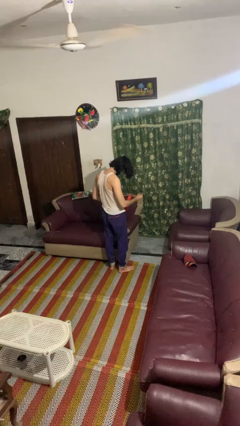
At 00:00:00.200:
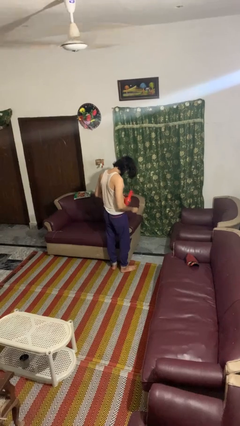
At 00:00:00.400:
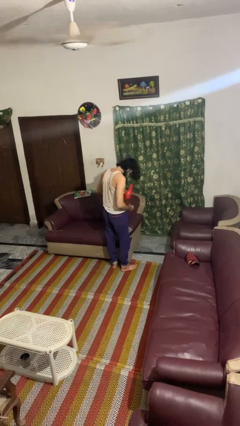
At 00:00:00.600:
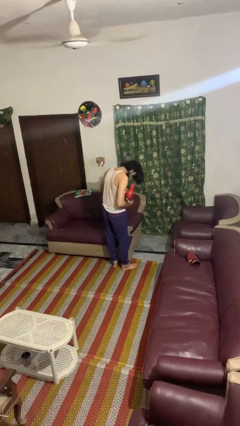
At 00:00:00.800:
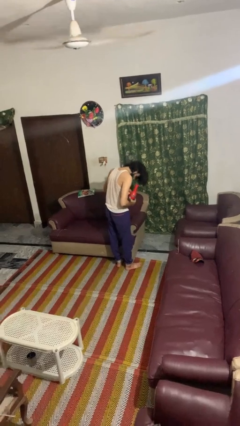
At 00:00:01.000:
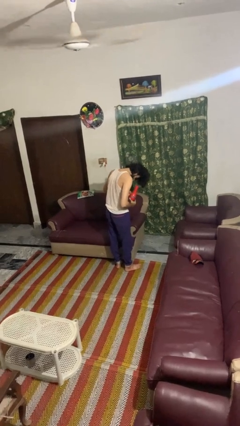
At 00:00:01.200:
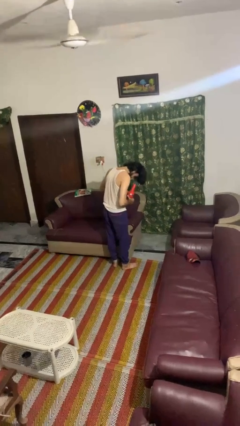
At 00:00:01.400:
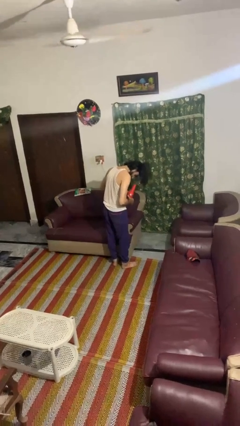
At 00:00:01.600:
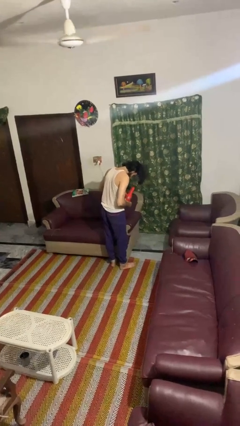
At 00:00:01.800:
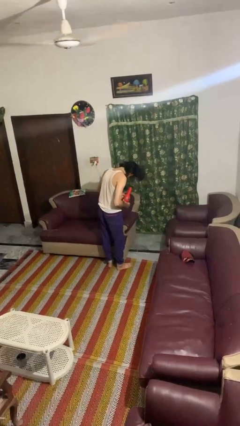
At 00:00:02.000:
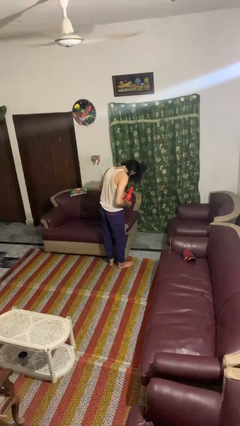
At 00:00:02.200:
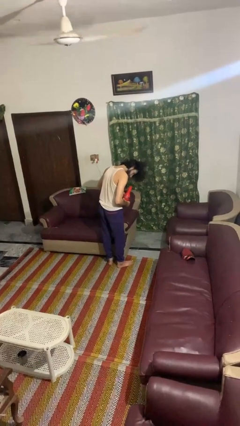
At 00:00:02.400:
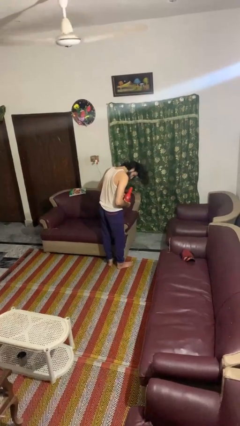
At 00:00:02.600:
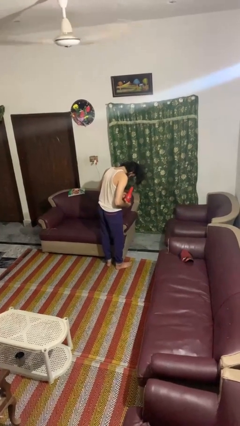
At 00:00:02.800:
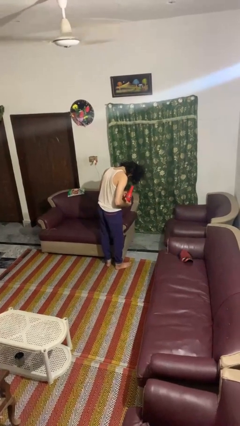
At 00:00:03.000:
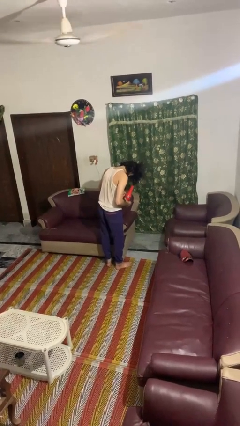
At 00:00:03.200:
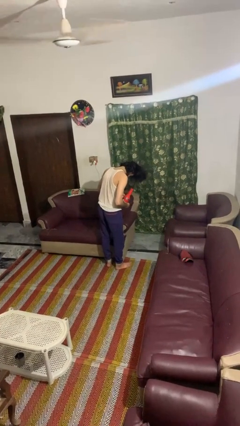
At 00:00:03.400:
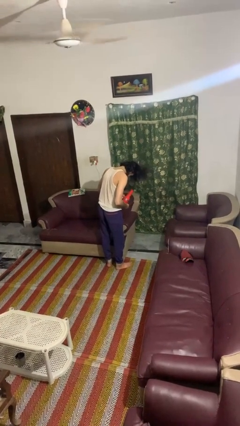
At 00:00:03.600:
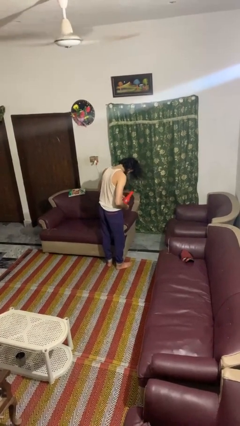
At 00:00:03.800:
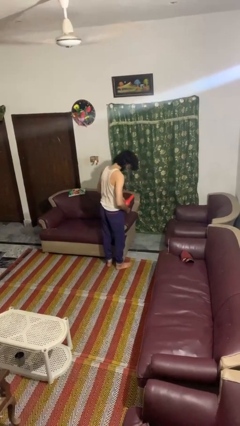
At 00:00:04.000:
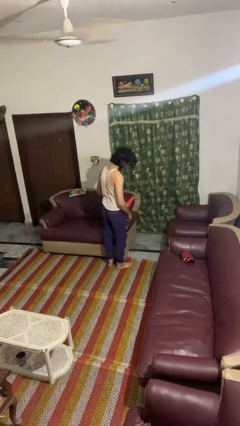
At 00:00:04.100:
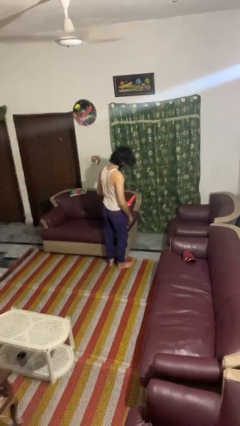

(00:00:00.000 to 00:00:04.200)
person dries hair with hairdryer

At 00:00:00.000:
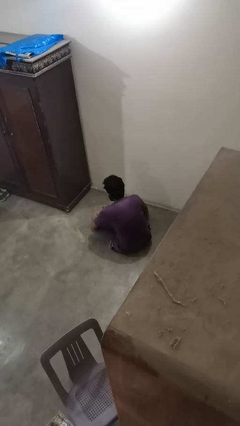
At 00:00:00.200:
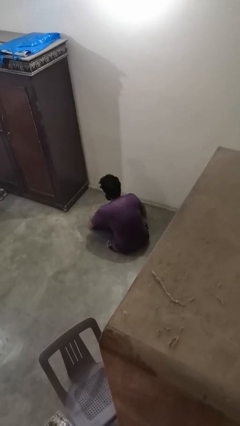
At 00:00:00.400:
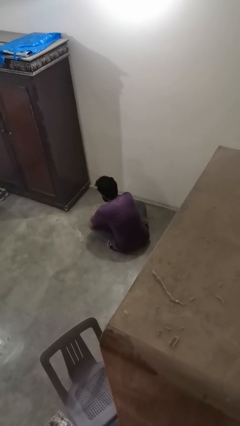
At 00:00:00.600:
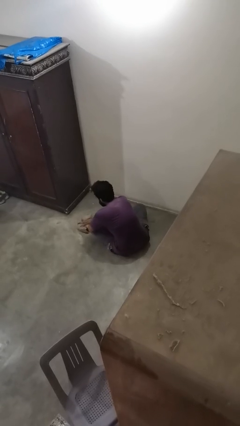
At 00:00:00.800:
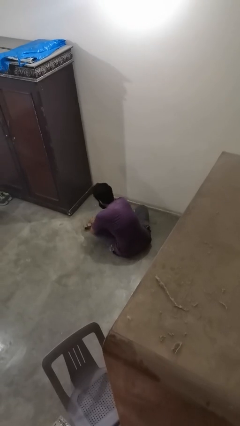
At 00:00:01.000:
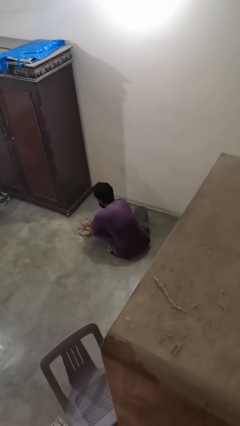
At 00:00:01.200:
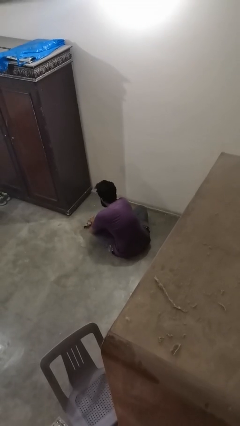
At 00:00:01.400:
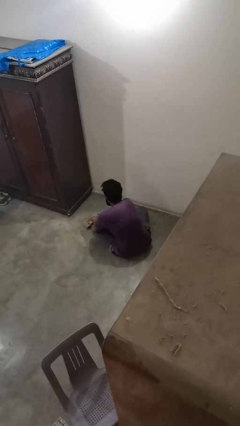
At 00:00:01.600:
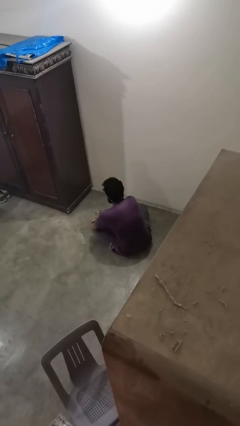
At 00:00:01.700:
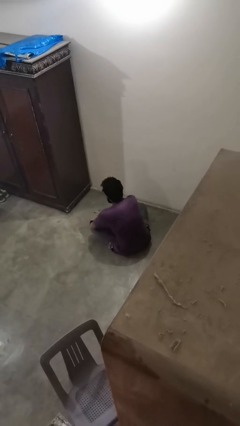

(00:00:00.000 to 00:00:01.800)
person mops

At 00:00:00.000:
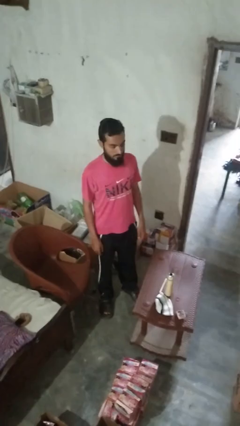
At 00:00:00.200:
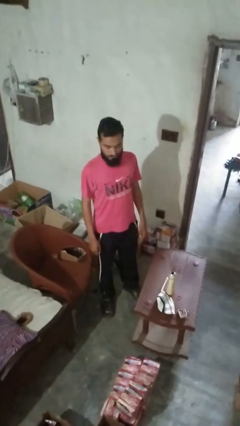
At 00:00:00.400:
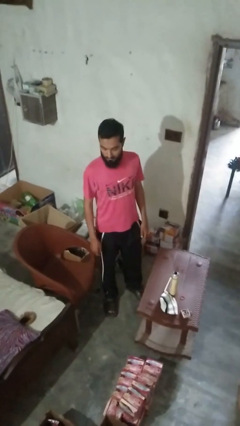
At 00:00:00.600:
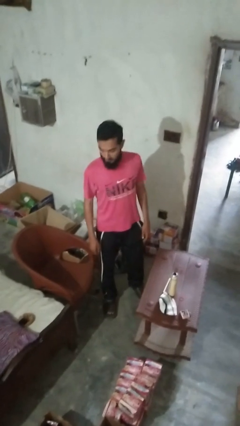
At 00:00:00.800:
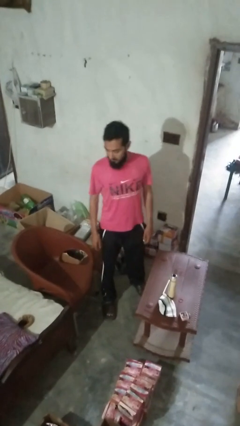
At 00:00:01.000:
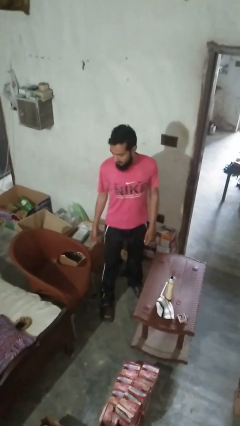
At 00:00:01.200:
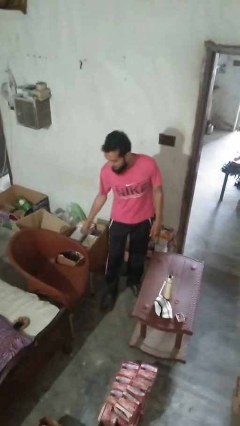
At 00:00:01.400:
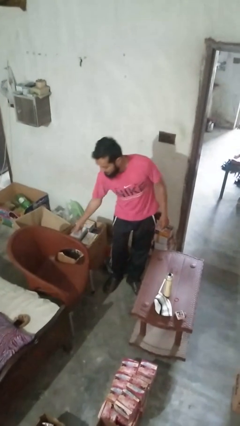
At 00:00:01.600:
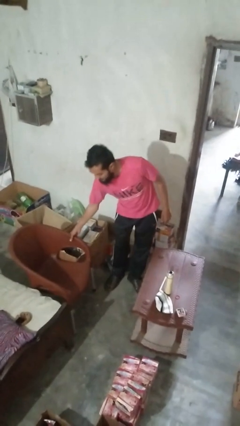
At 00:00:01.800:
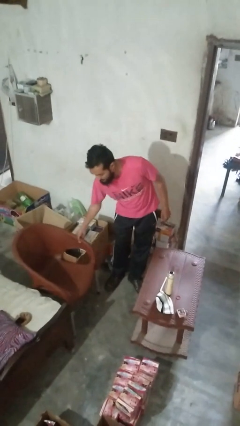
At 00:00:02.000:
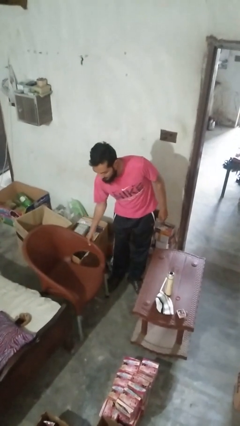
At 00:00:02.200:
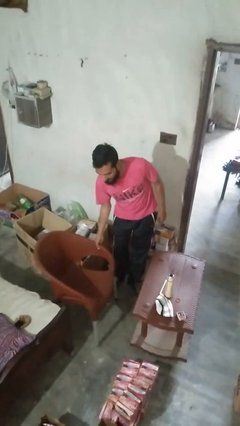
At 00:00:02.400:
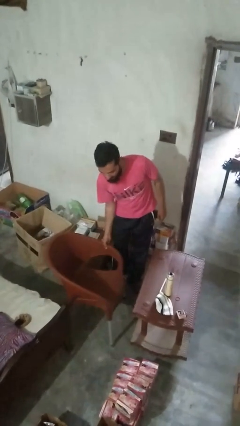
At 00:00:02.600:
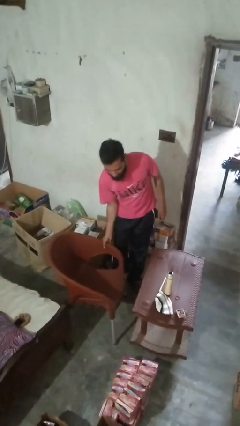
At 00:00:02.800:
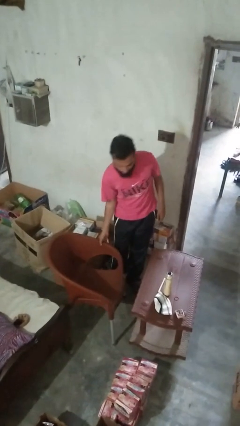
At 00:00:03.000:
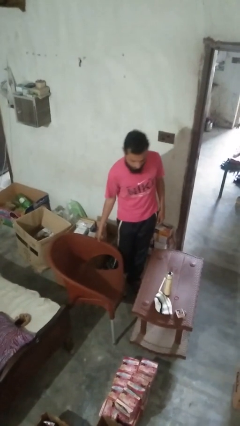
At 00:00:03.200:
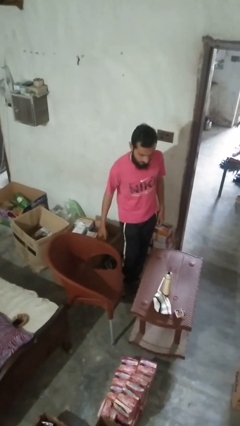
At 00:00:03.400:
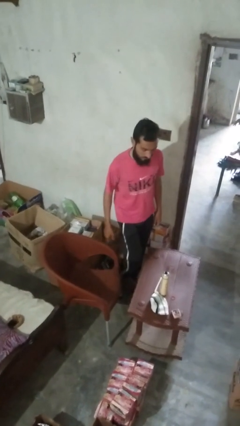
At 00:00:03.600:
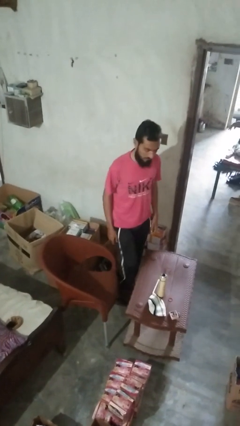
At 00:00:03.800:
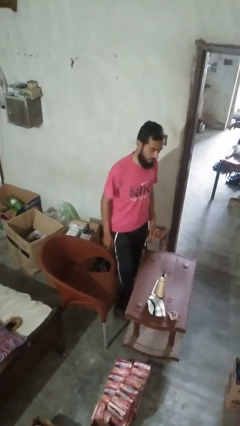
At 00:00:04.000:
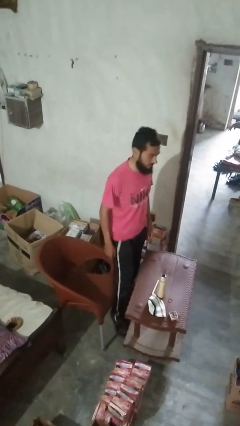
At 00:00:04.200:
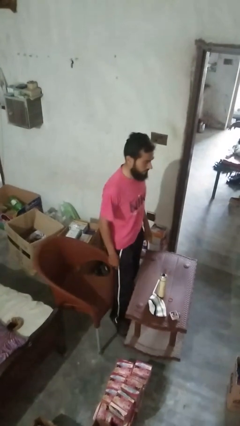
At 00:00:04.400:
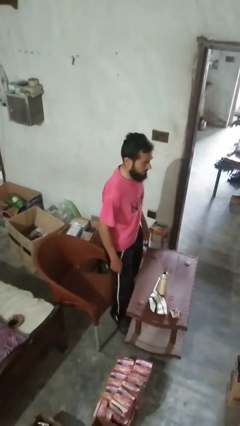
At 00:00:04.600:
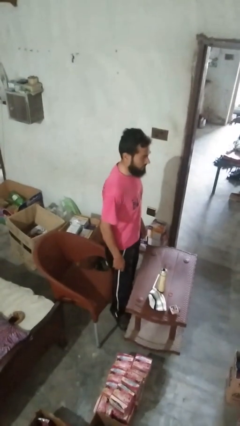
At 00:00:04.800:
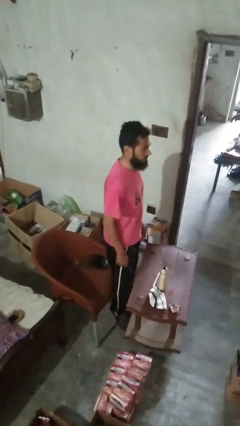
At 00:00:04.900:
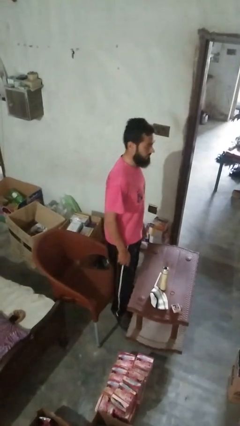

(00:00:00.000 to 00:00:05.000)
person pulls out chair

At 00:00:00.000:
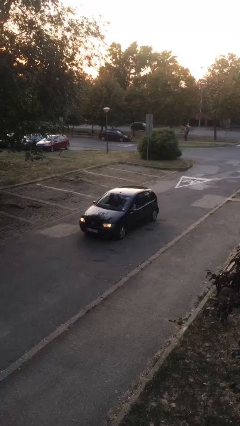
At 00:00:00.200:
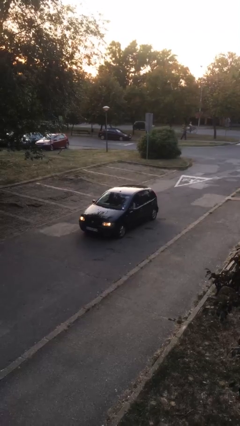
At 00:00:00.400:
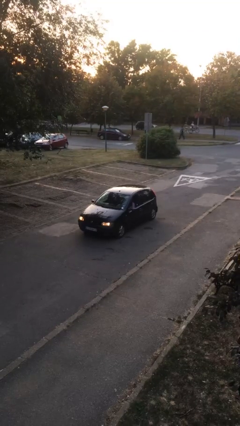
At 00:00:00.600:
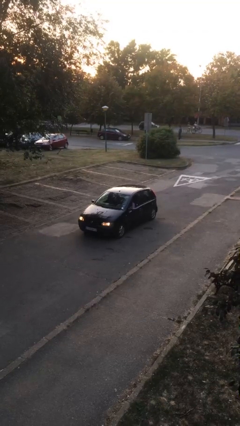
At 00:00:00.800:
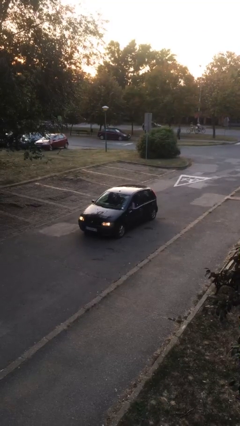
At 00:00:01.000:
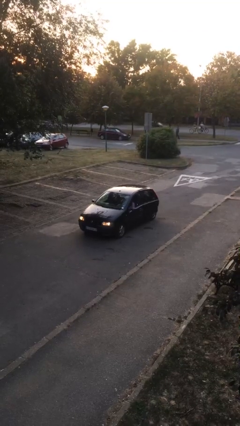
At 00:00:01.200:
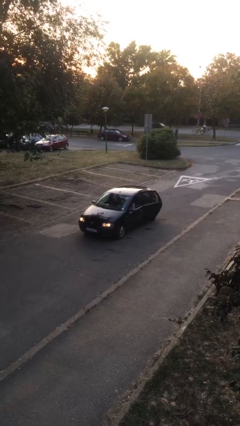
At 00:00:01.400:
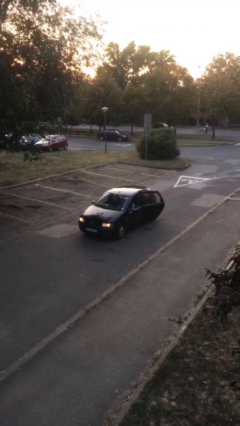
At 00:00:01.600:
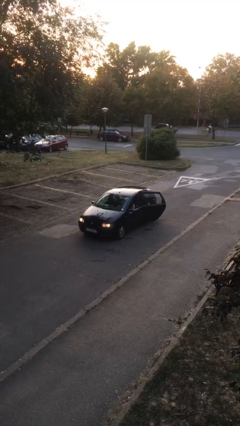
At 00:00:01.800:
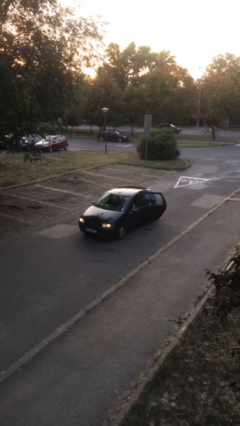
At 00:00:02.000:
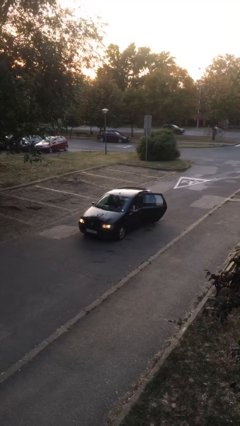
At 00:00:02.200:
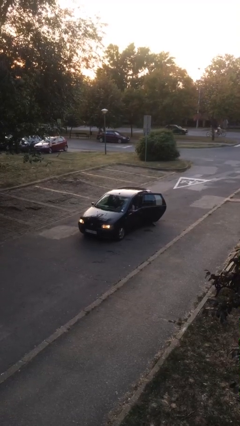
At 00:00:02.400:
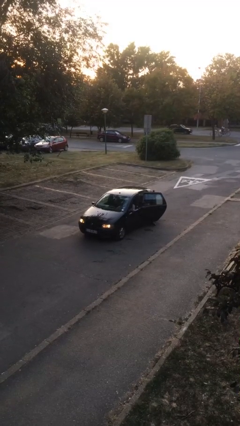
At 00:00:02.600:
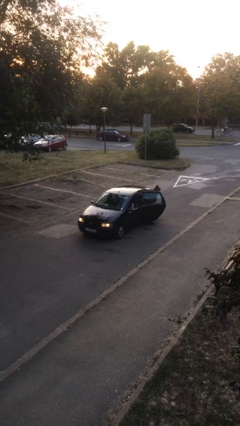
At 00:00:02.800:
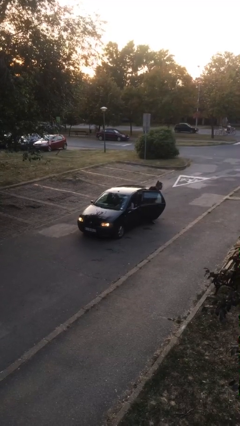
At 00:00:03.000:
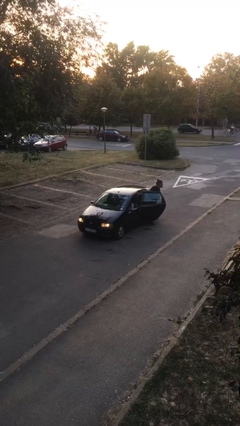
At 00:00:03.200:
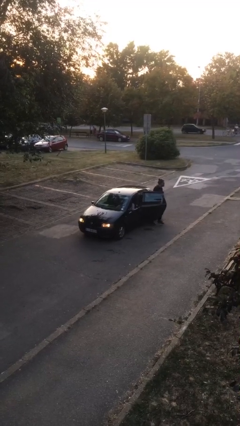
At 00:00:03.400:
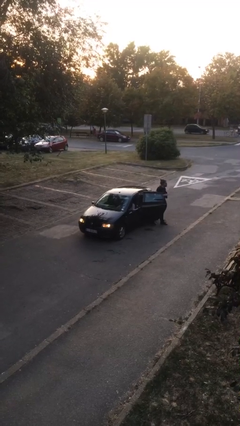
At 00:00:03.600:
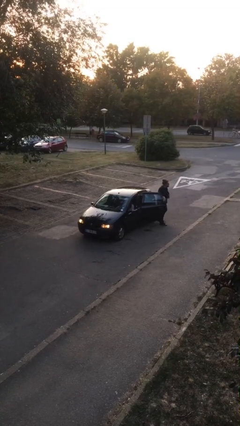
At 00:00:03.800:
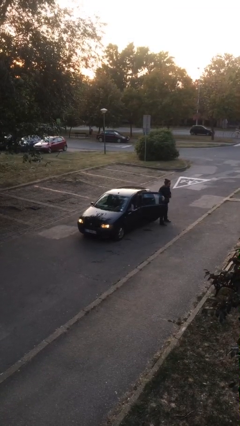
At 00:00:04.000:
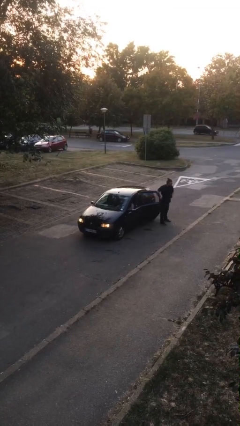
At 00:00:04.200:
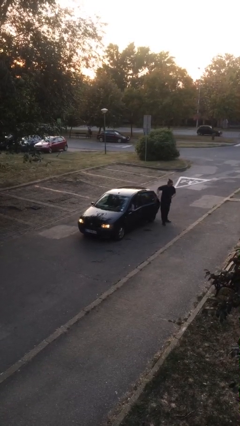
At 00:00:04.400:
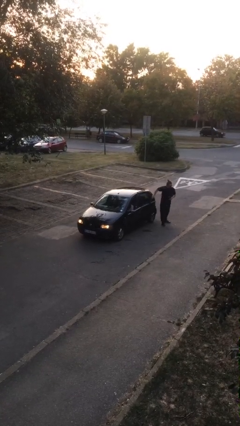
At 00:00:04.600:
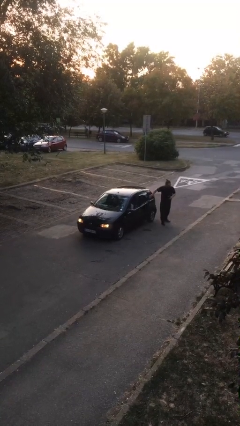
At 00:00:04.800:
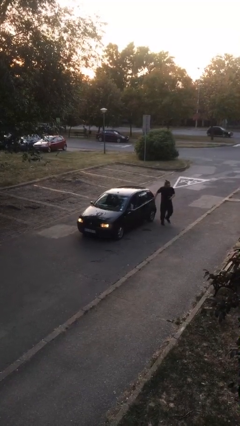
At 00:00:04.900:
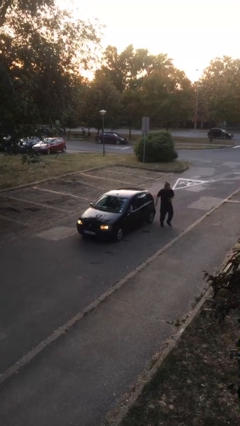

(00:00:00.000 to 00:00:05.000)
car drops off person

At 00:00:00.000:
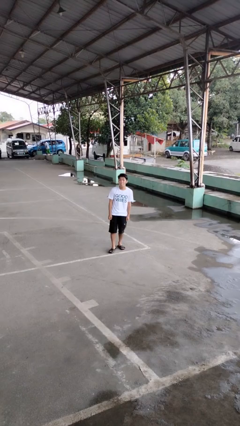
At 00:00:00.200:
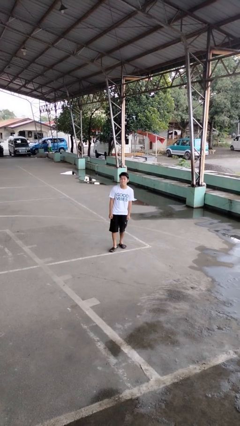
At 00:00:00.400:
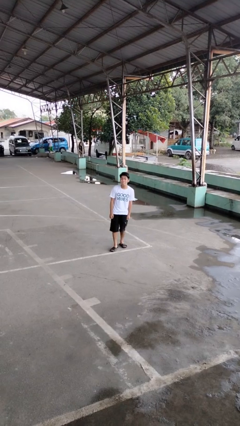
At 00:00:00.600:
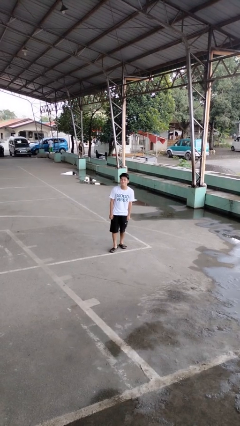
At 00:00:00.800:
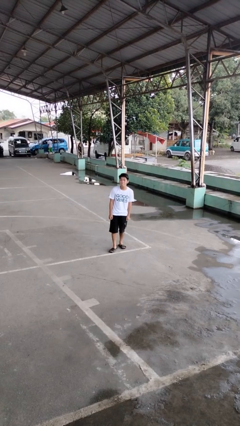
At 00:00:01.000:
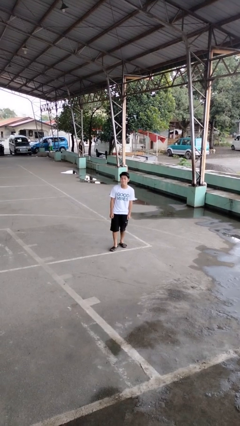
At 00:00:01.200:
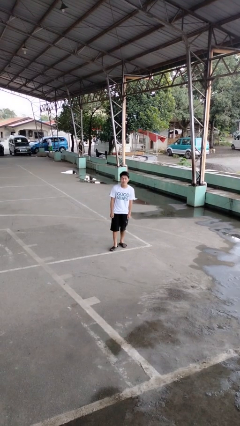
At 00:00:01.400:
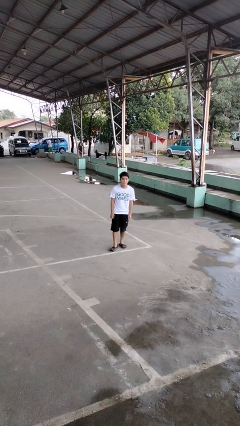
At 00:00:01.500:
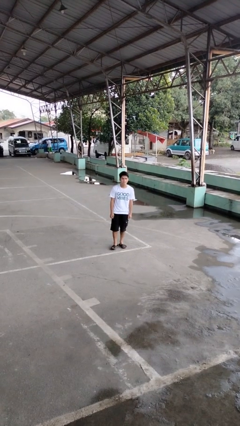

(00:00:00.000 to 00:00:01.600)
person sticks out tongue
